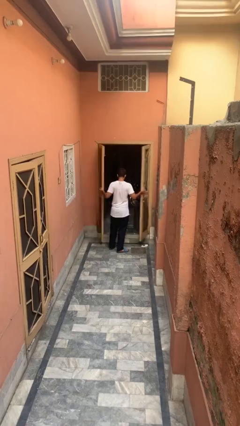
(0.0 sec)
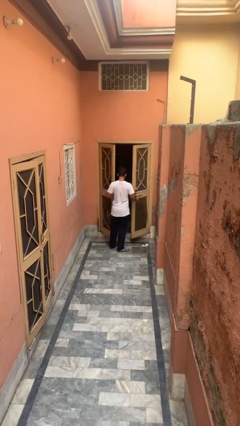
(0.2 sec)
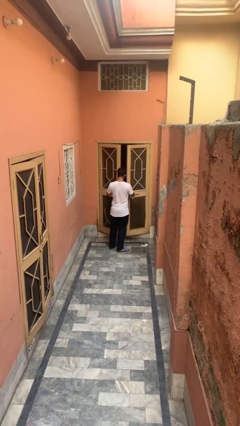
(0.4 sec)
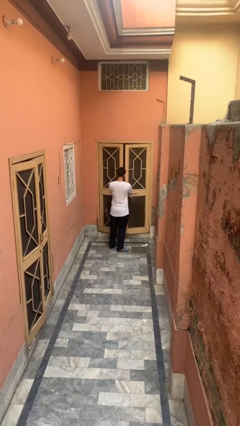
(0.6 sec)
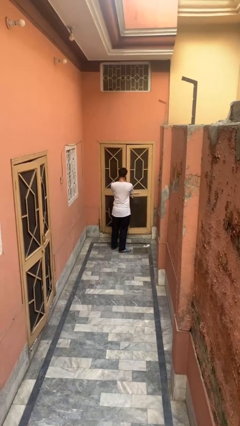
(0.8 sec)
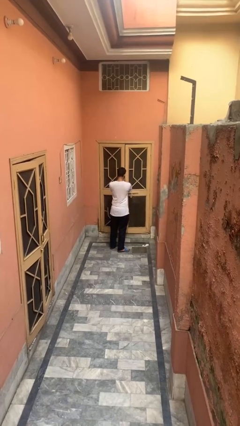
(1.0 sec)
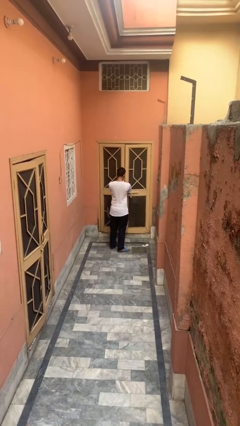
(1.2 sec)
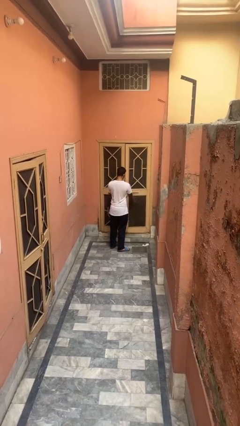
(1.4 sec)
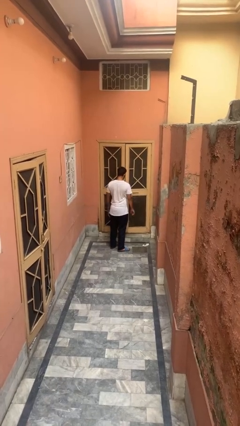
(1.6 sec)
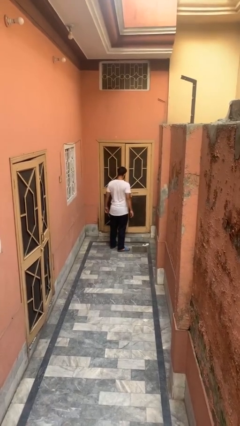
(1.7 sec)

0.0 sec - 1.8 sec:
person closes gate

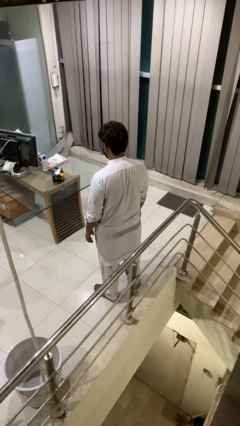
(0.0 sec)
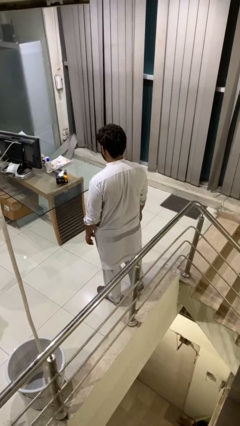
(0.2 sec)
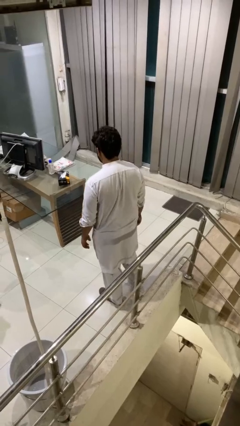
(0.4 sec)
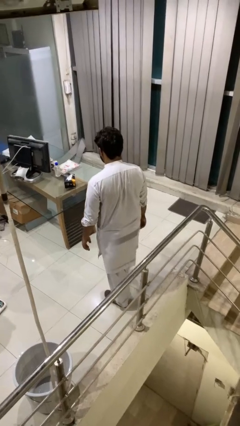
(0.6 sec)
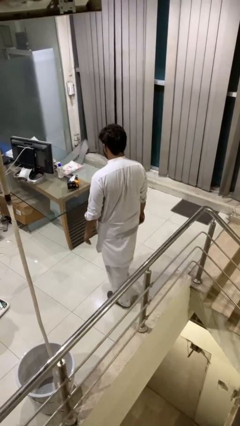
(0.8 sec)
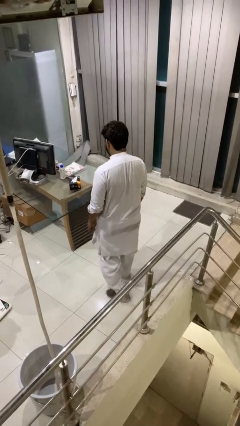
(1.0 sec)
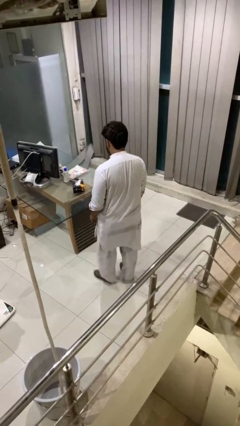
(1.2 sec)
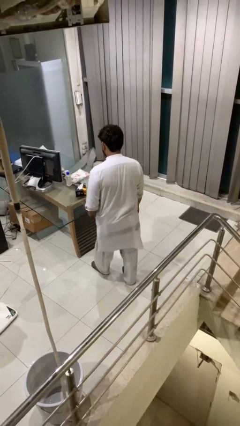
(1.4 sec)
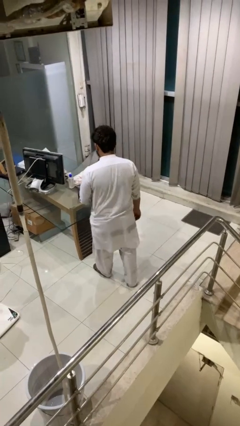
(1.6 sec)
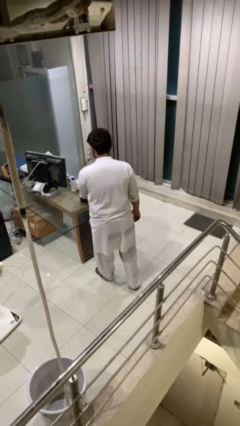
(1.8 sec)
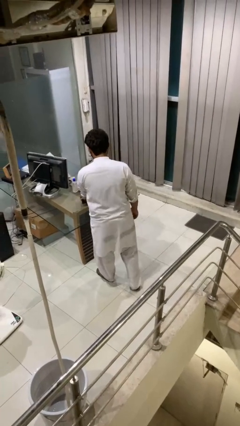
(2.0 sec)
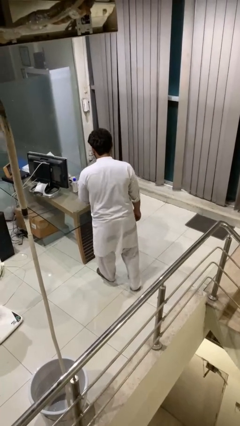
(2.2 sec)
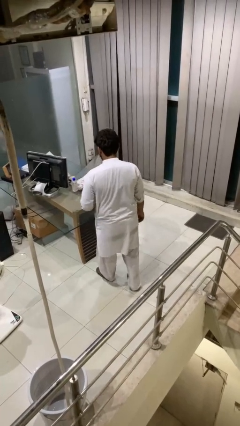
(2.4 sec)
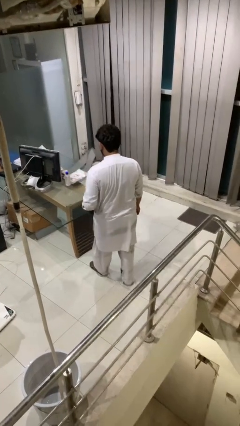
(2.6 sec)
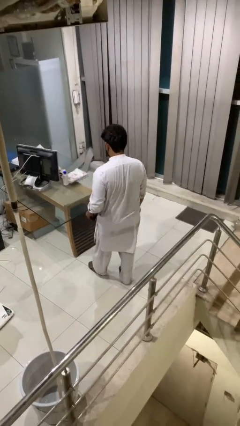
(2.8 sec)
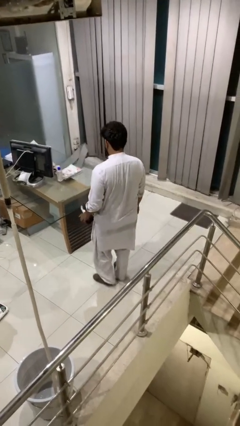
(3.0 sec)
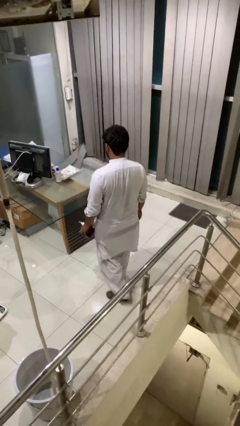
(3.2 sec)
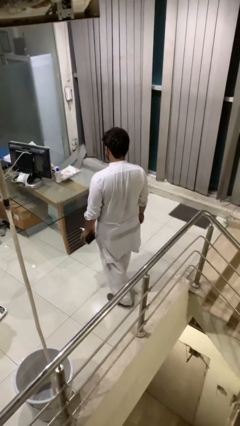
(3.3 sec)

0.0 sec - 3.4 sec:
person picks up object from table

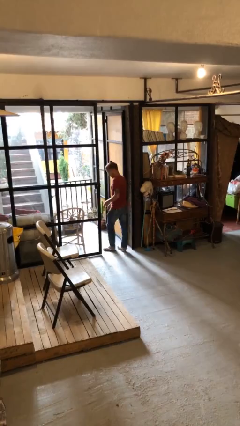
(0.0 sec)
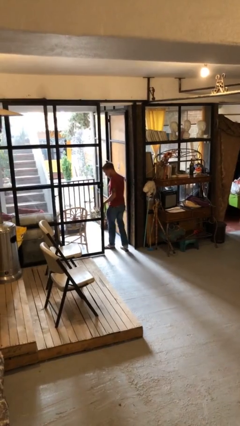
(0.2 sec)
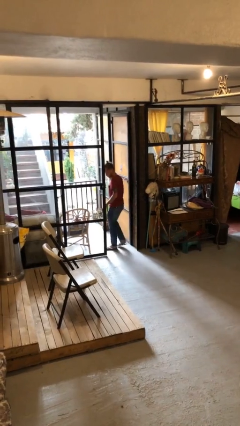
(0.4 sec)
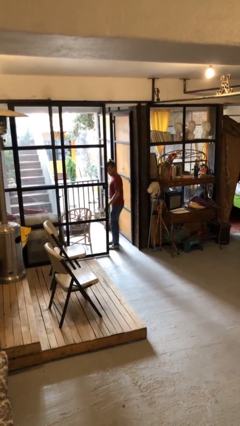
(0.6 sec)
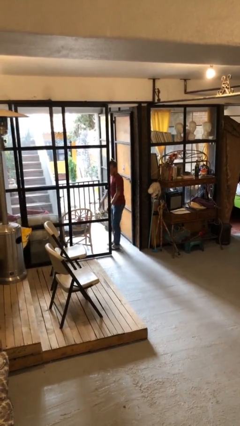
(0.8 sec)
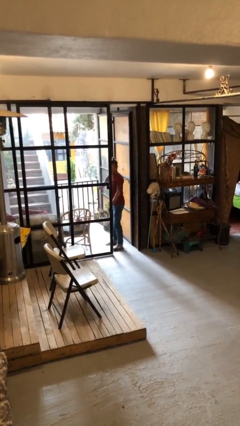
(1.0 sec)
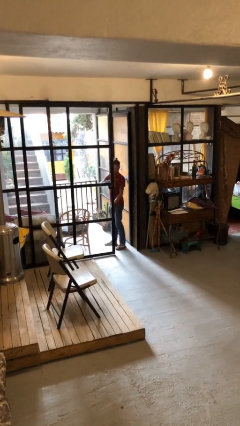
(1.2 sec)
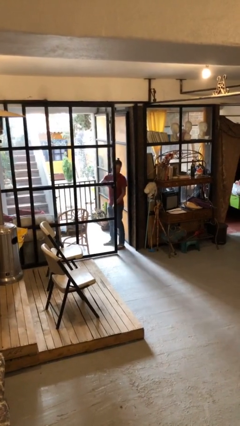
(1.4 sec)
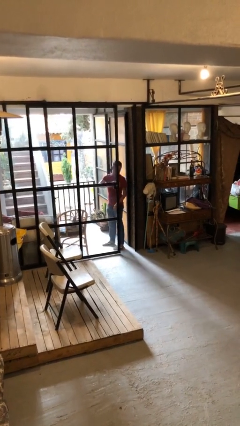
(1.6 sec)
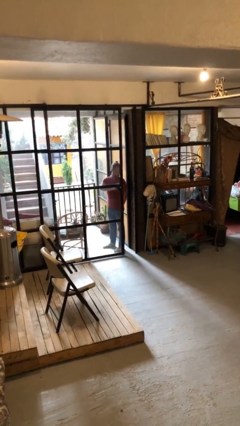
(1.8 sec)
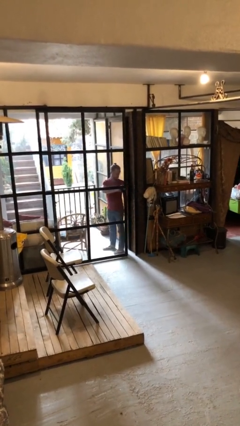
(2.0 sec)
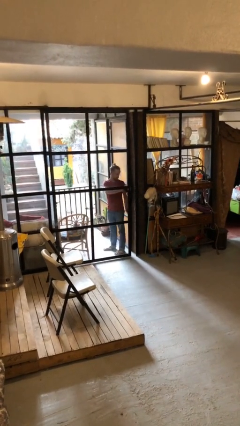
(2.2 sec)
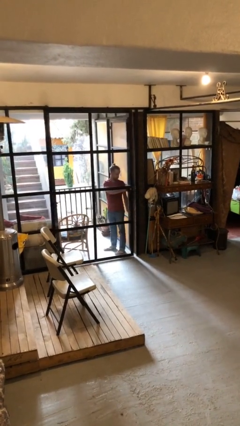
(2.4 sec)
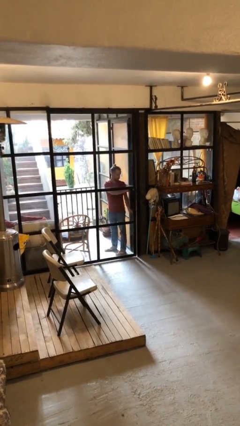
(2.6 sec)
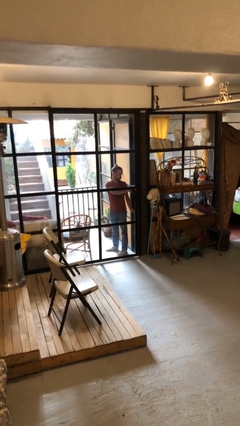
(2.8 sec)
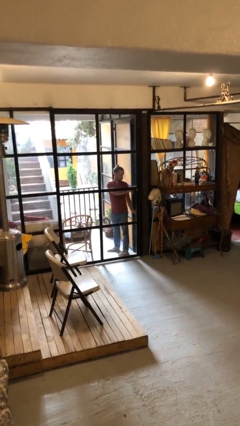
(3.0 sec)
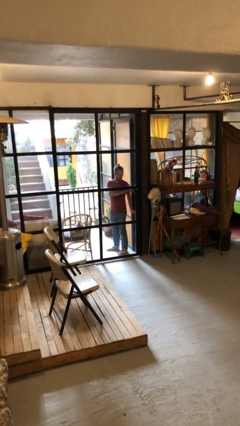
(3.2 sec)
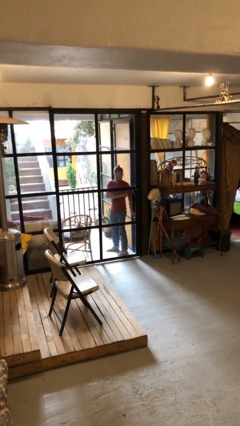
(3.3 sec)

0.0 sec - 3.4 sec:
person closes facility door

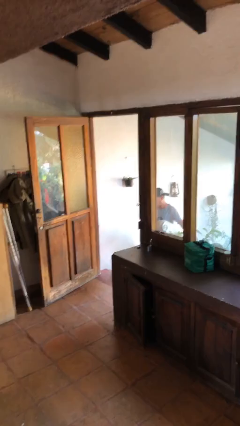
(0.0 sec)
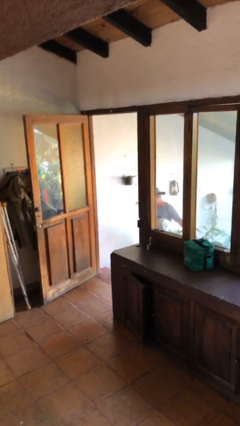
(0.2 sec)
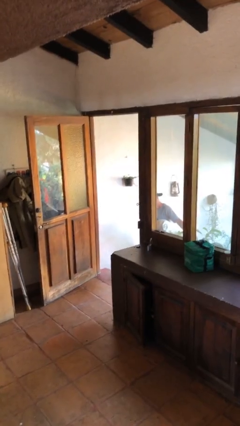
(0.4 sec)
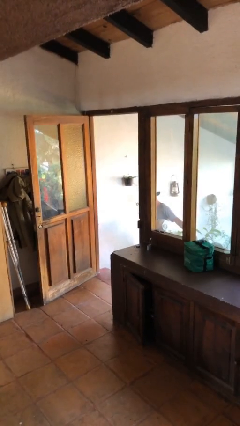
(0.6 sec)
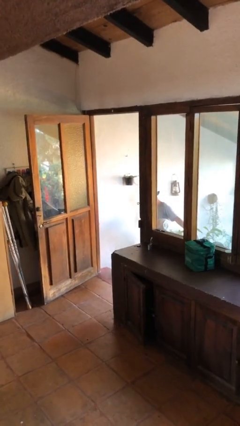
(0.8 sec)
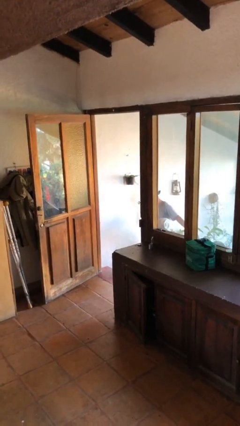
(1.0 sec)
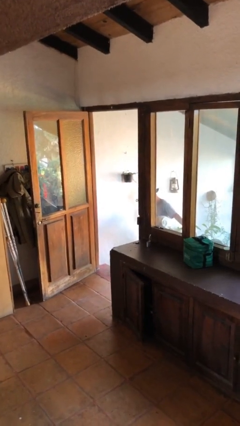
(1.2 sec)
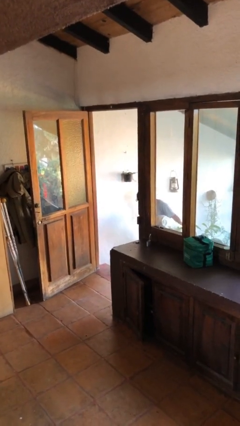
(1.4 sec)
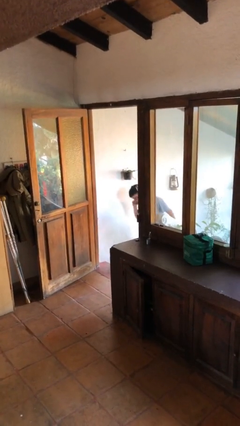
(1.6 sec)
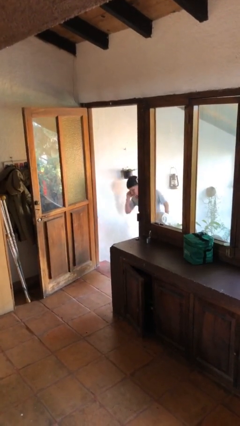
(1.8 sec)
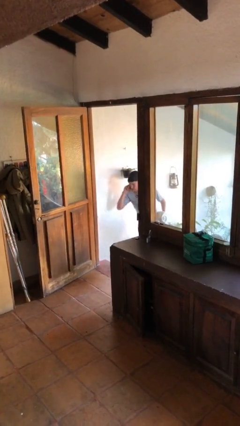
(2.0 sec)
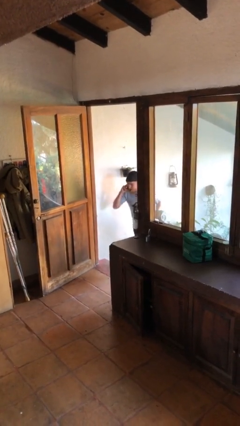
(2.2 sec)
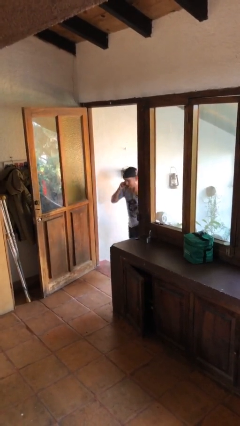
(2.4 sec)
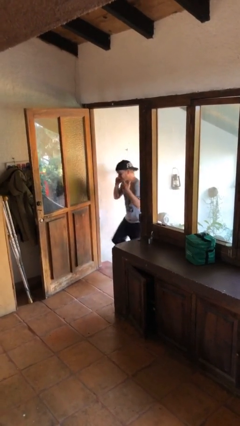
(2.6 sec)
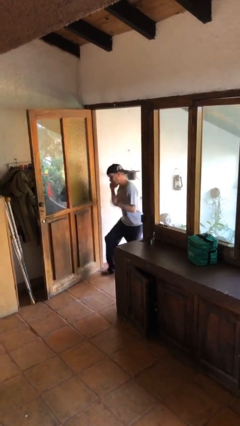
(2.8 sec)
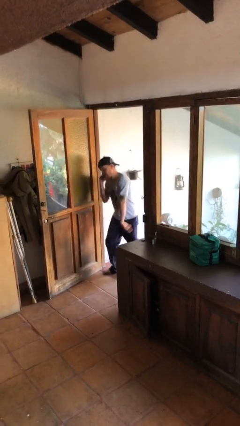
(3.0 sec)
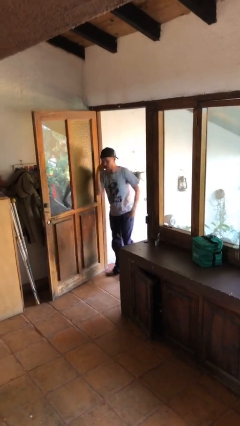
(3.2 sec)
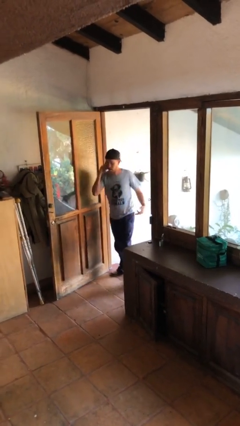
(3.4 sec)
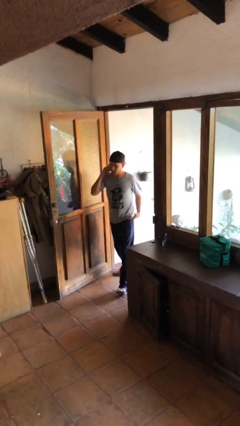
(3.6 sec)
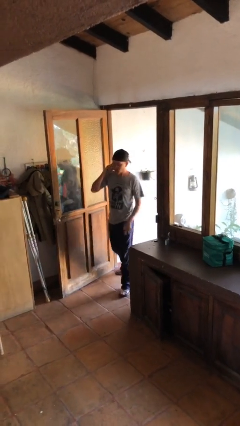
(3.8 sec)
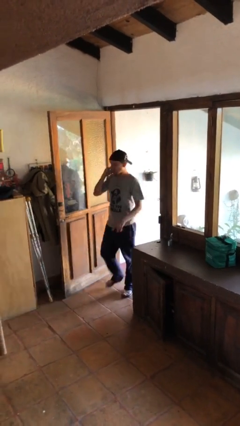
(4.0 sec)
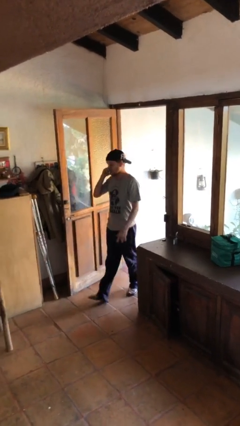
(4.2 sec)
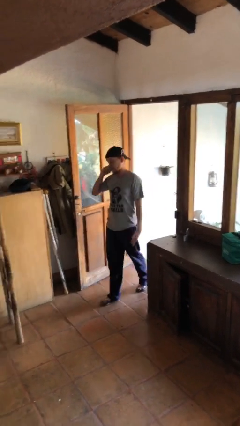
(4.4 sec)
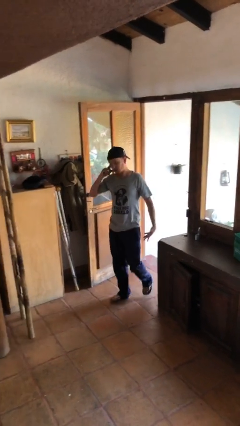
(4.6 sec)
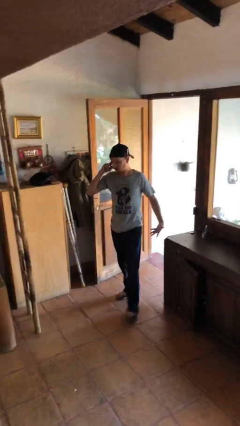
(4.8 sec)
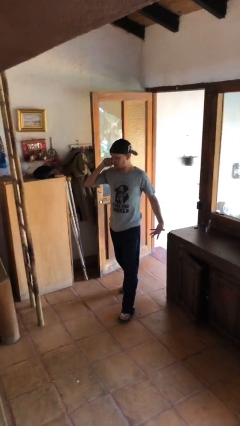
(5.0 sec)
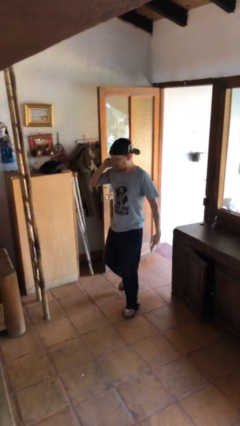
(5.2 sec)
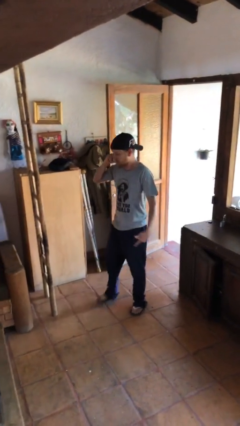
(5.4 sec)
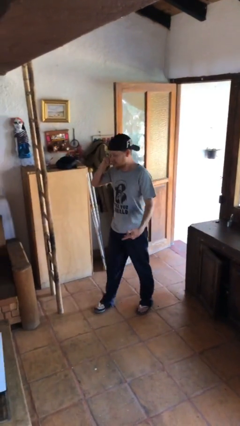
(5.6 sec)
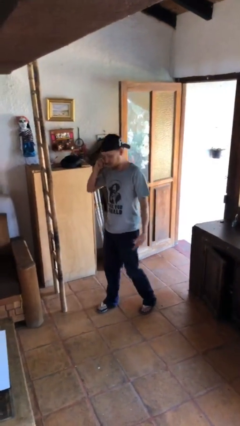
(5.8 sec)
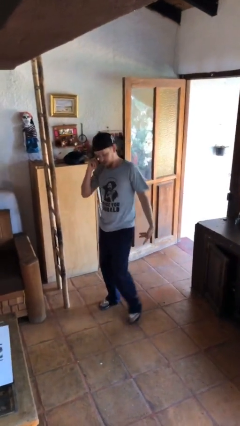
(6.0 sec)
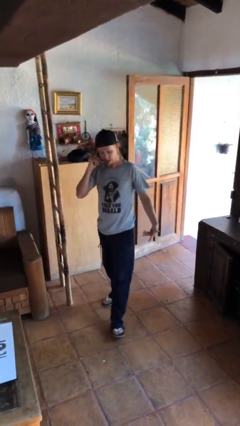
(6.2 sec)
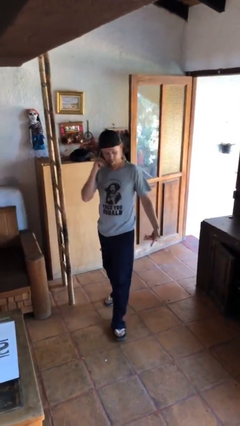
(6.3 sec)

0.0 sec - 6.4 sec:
person enters scene through structure

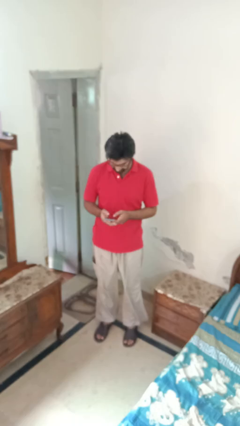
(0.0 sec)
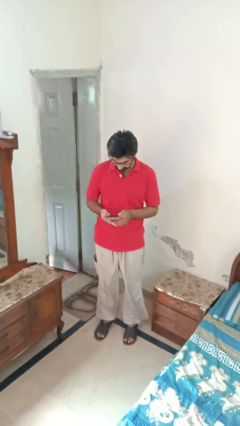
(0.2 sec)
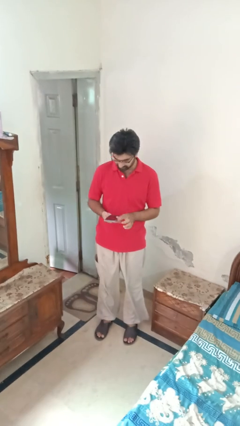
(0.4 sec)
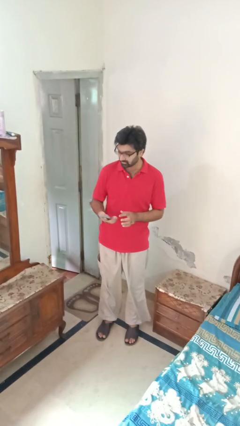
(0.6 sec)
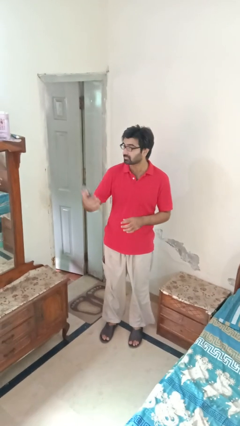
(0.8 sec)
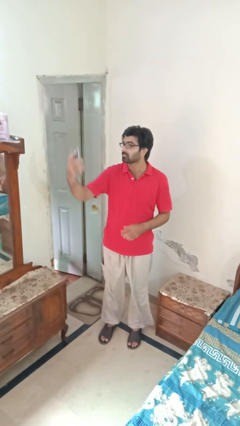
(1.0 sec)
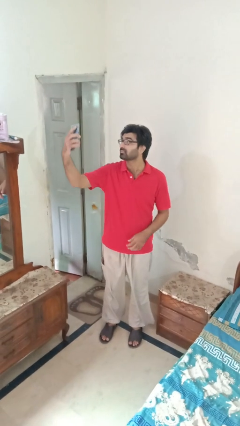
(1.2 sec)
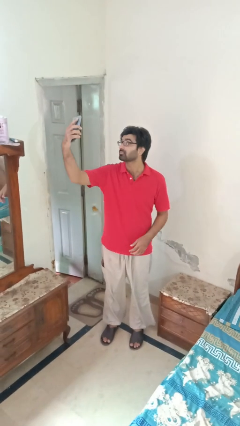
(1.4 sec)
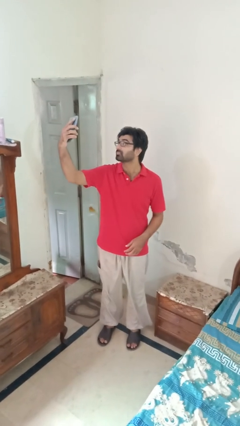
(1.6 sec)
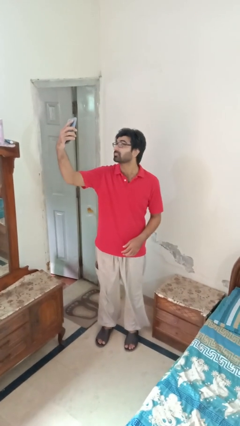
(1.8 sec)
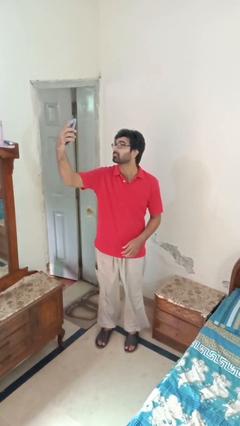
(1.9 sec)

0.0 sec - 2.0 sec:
person takes selfie
